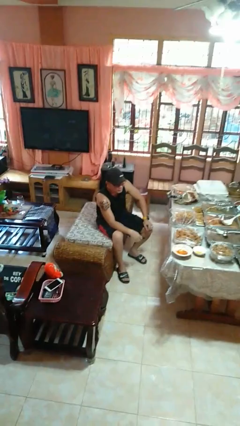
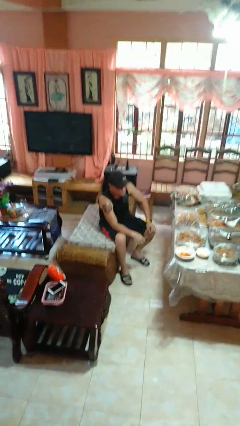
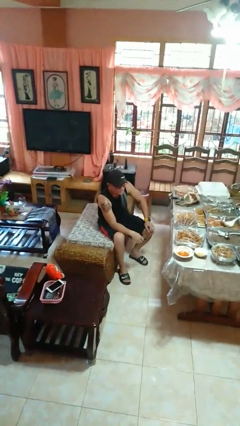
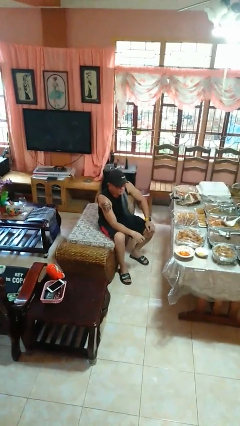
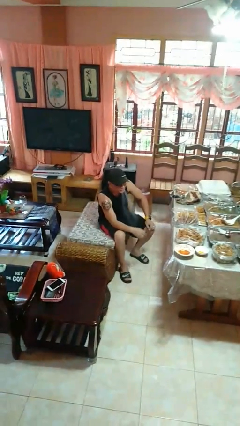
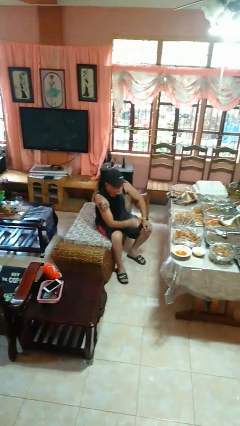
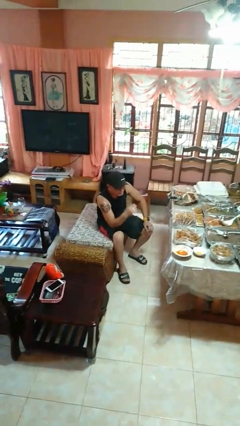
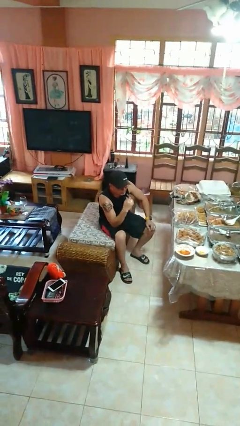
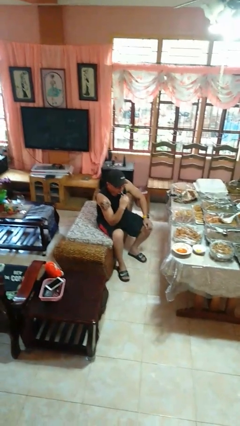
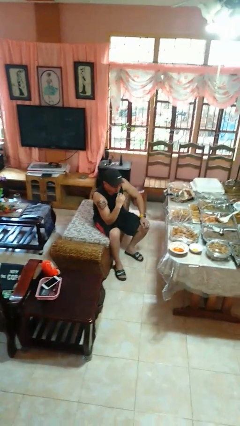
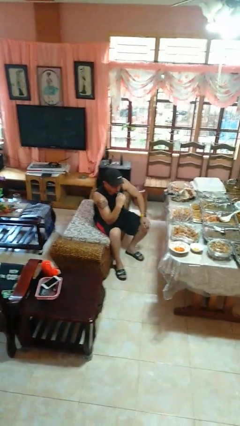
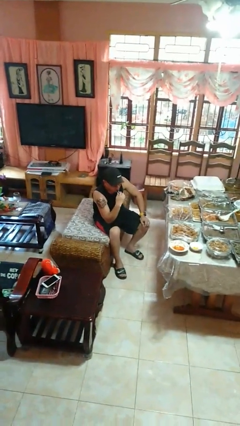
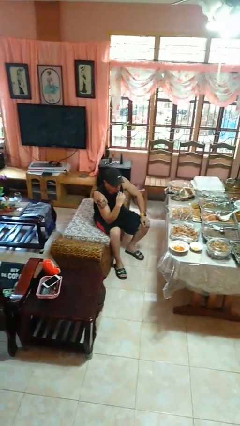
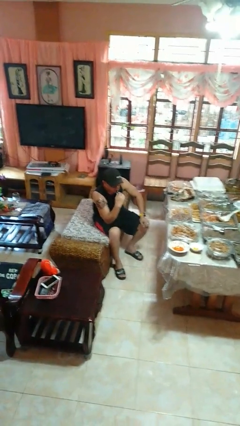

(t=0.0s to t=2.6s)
person vapes

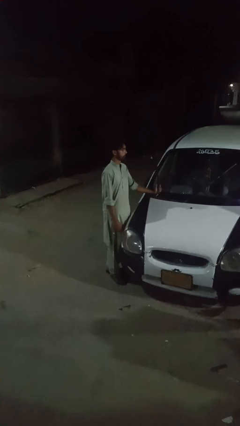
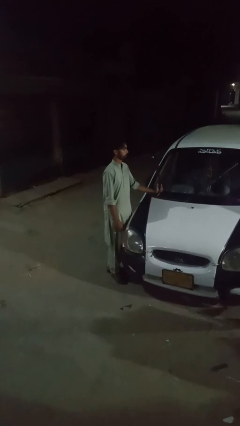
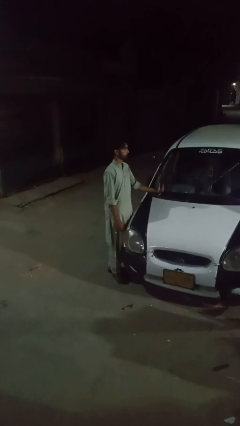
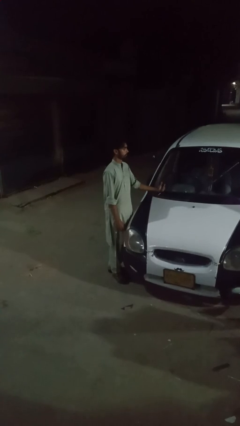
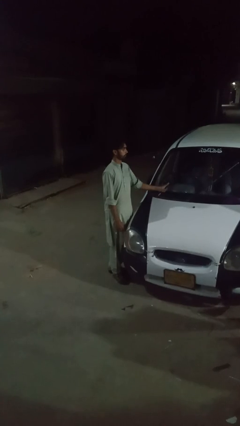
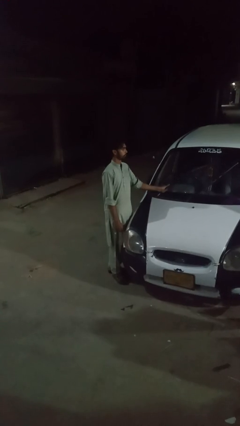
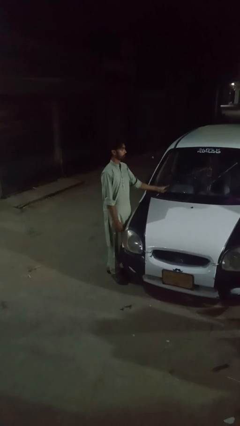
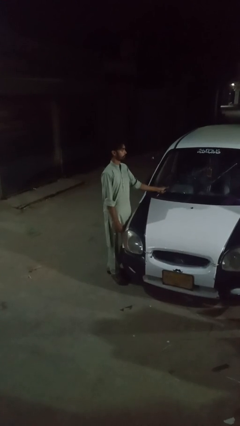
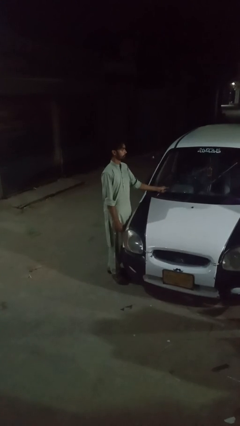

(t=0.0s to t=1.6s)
person flips down car wipers

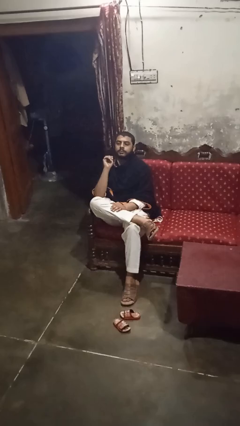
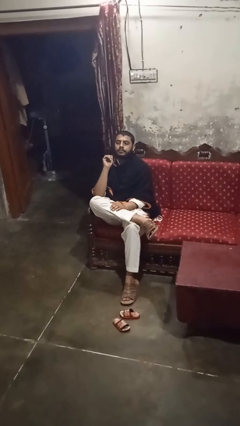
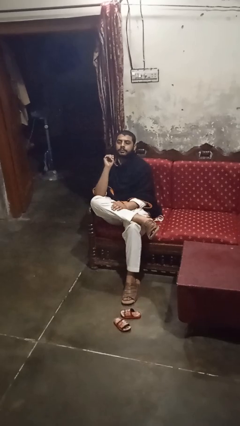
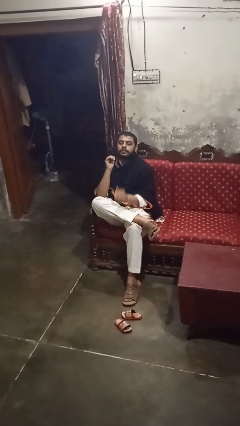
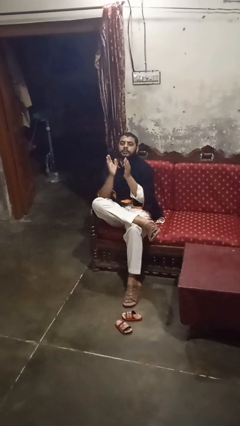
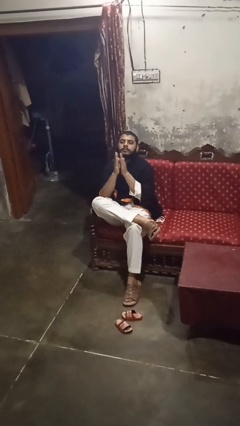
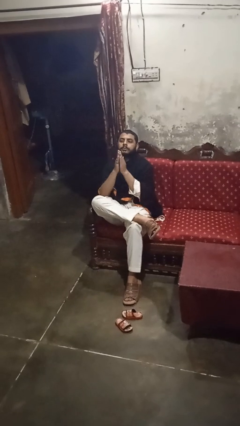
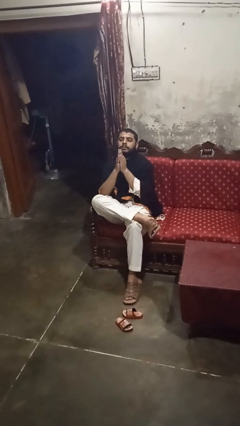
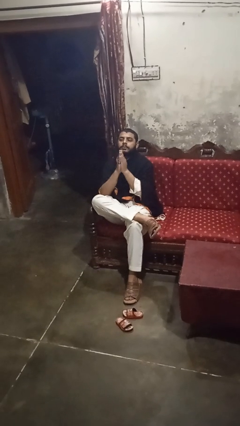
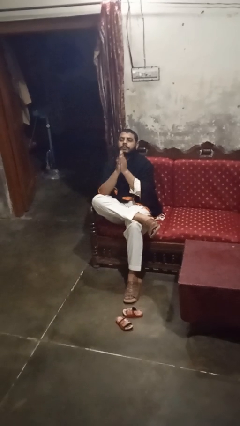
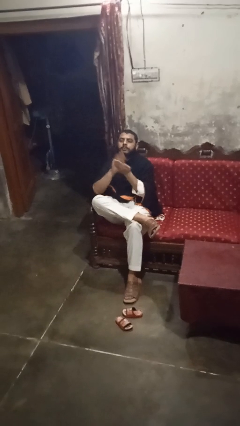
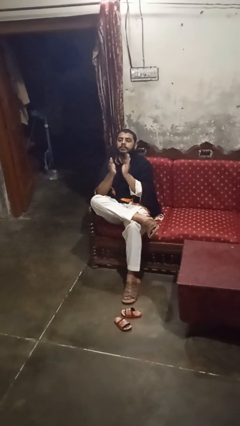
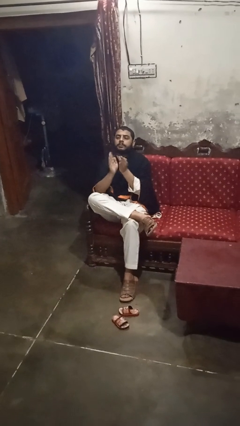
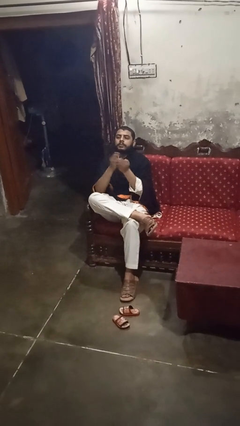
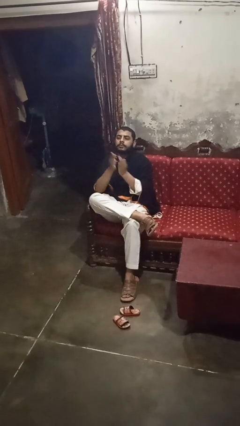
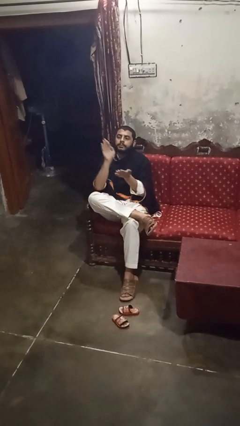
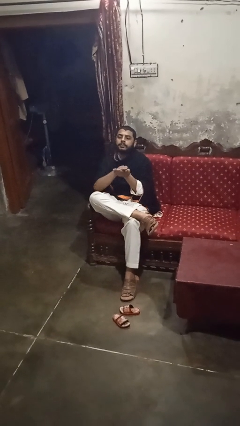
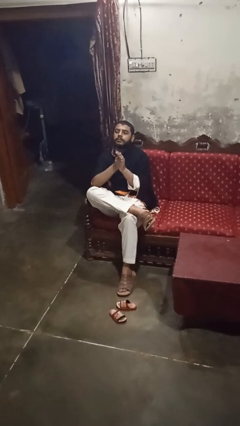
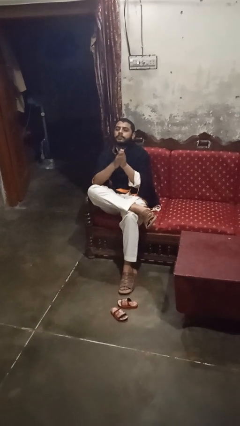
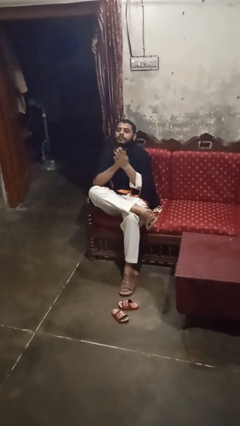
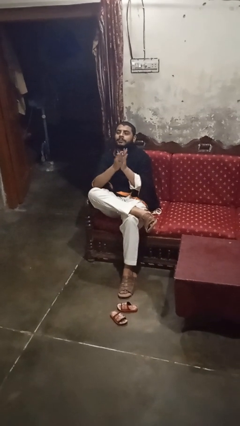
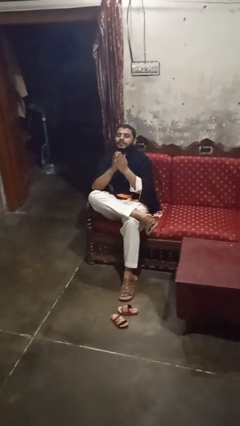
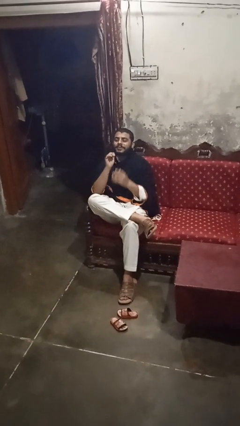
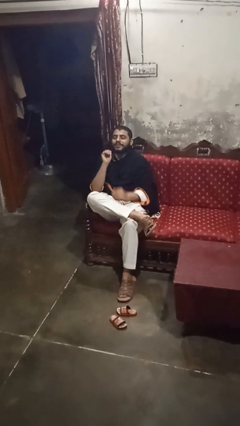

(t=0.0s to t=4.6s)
person claps hands

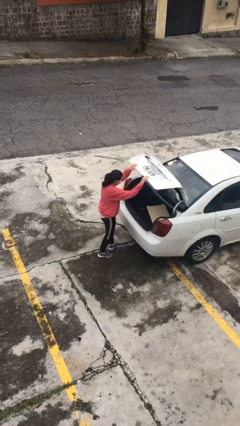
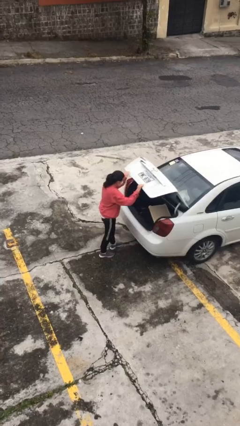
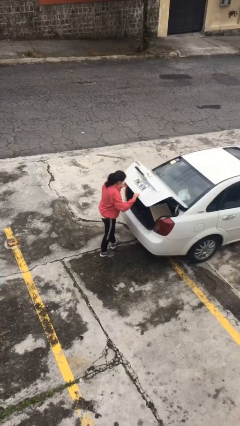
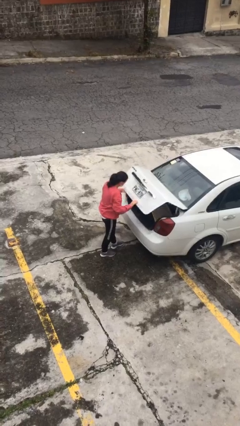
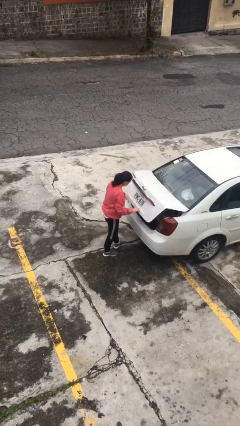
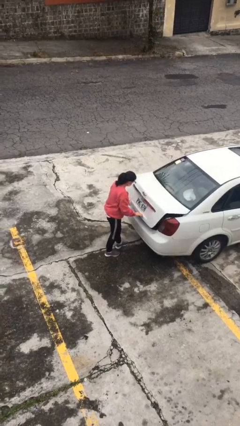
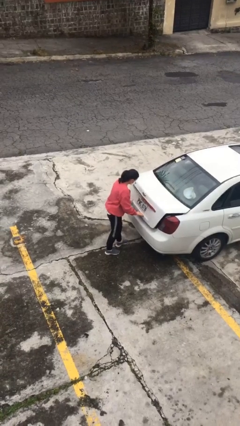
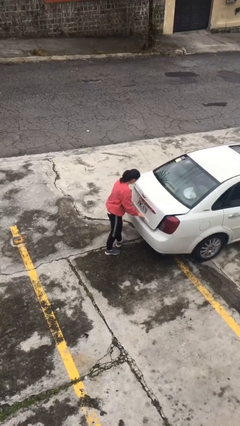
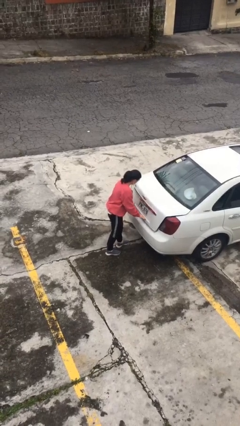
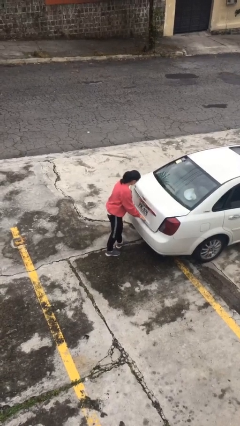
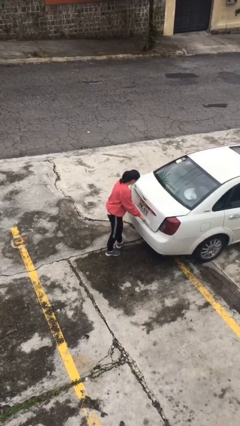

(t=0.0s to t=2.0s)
person closes car trunk

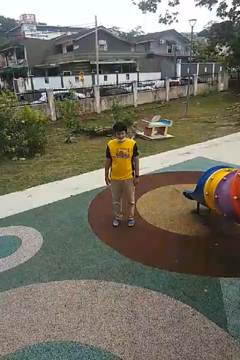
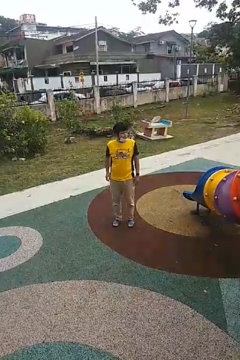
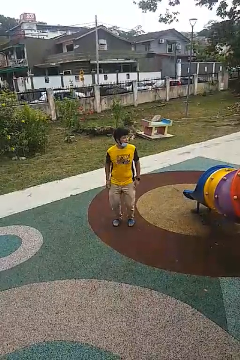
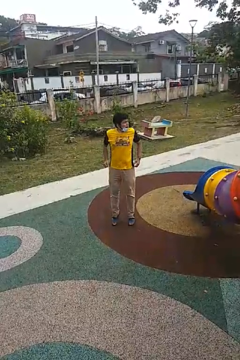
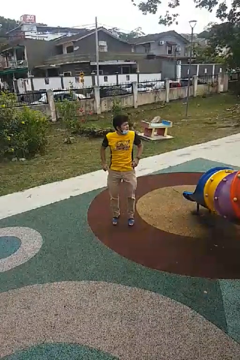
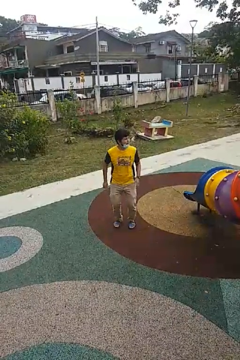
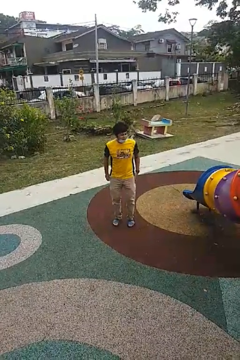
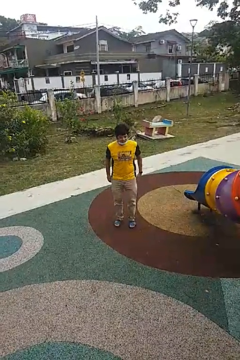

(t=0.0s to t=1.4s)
person jumps

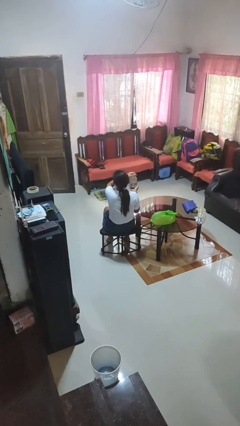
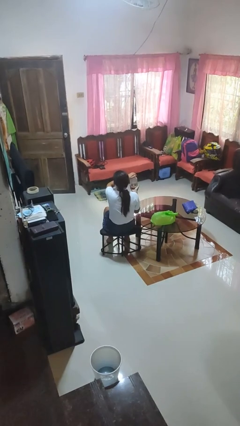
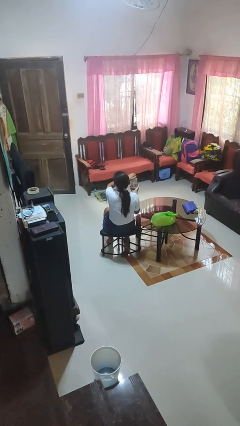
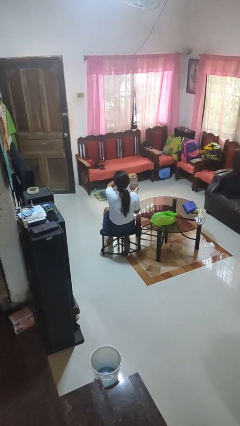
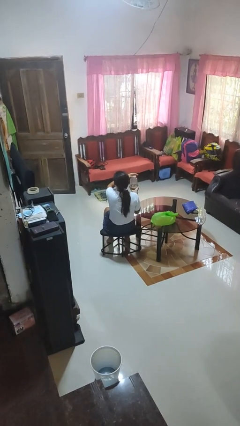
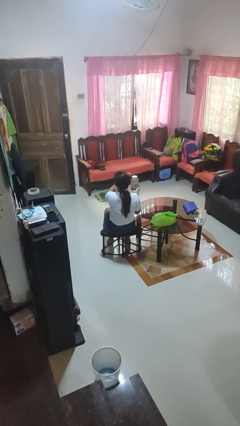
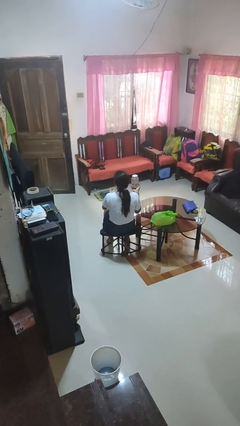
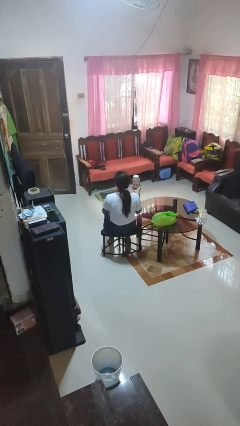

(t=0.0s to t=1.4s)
person closes jar

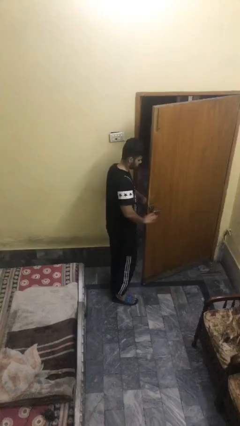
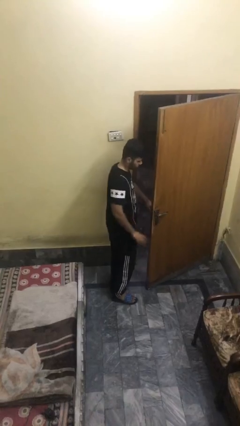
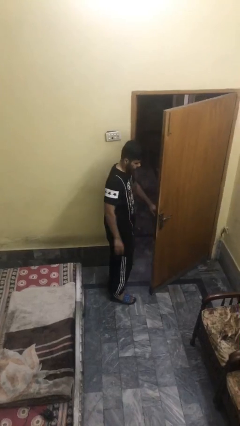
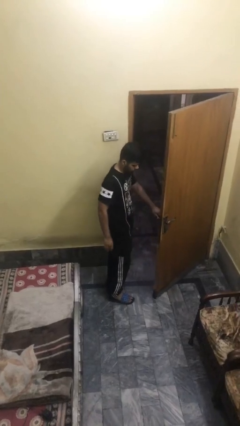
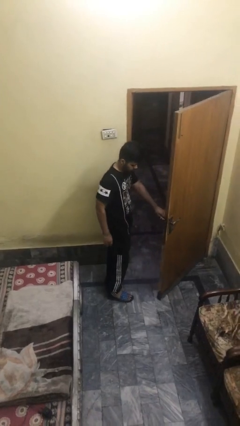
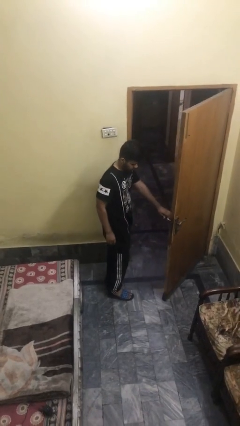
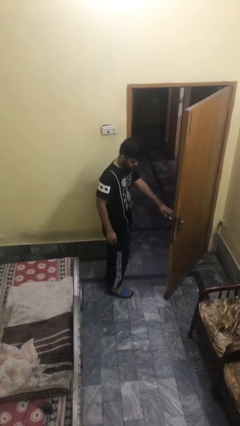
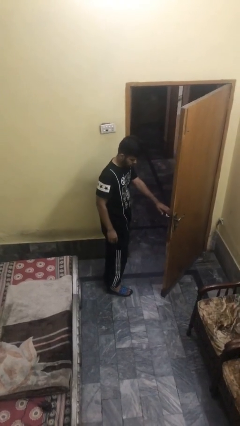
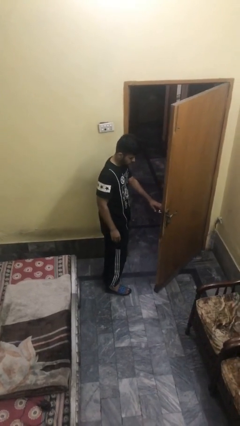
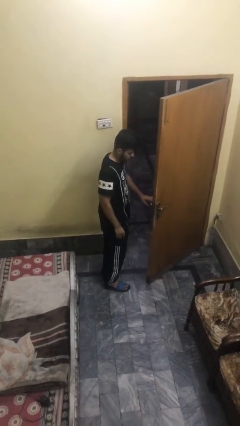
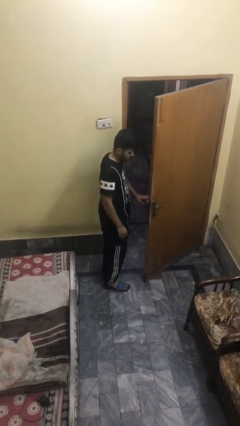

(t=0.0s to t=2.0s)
person opens facility door

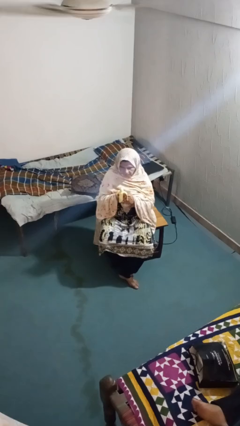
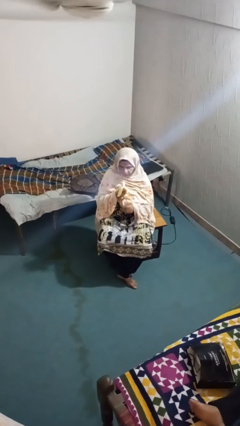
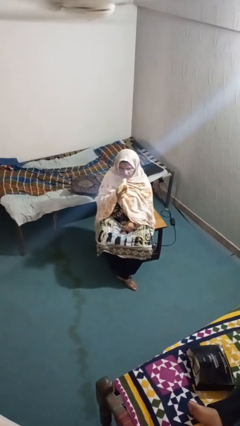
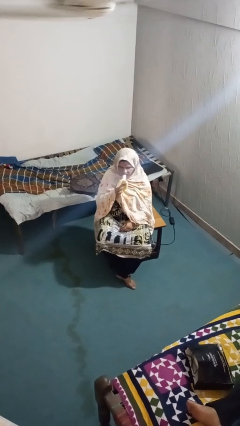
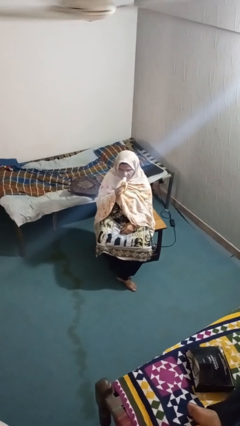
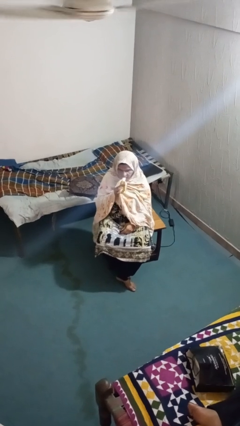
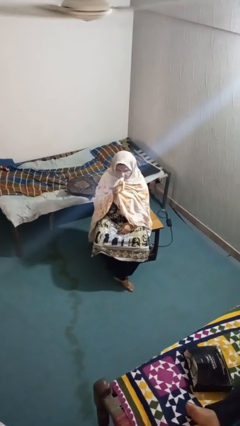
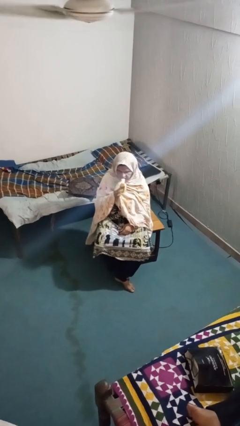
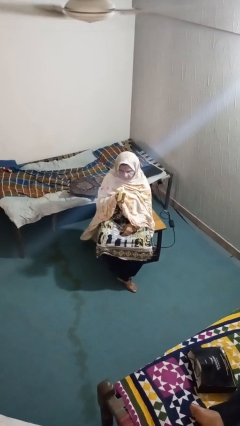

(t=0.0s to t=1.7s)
person eats banana
